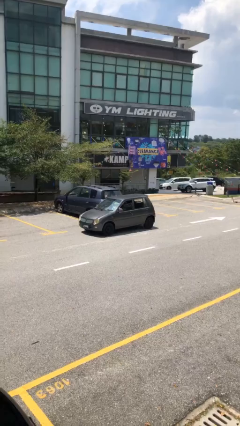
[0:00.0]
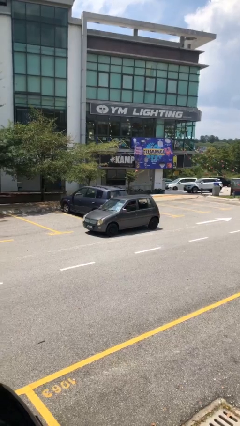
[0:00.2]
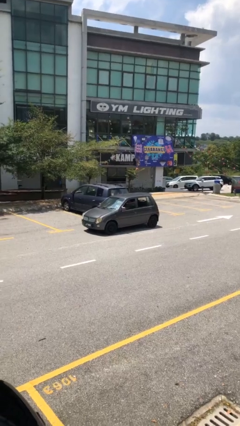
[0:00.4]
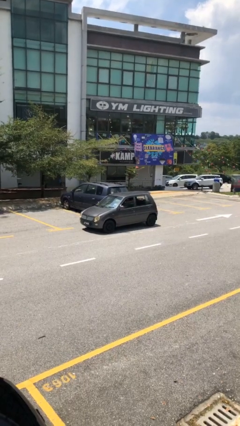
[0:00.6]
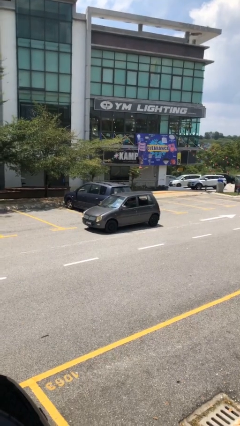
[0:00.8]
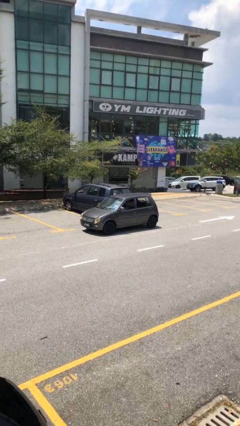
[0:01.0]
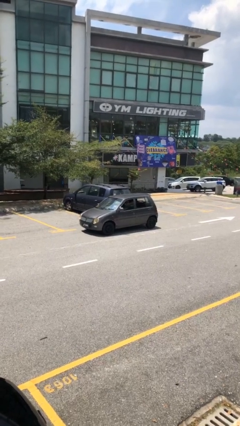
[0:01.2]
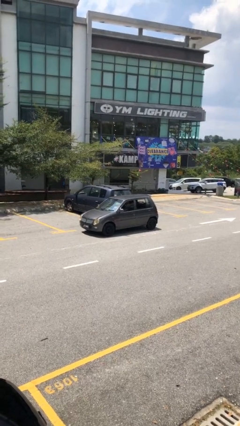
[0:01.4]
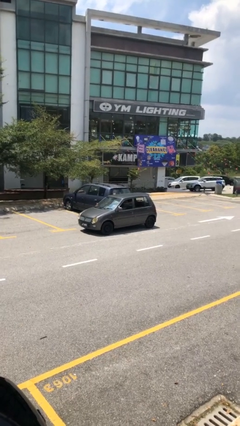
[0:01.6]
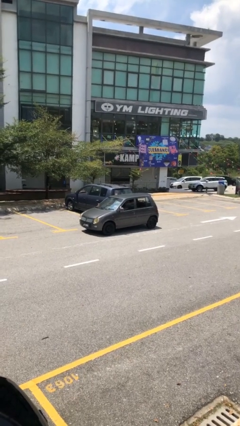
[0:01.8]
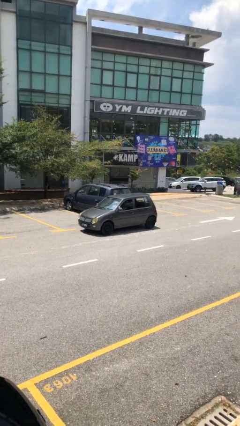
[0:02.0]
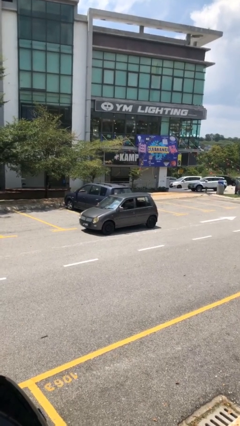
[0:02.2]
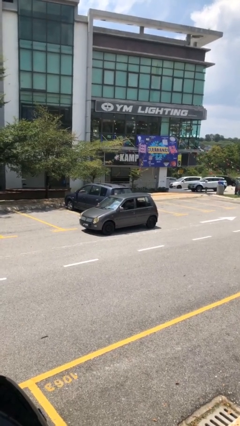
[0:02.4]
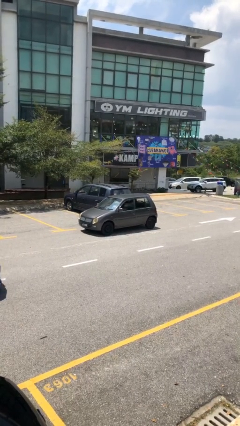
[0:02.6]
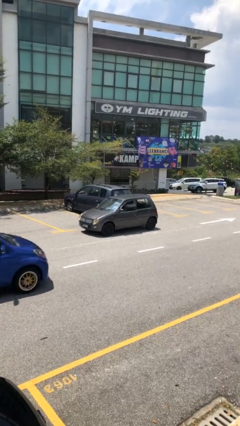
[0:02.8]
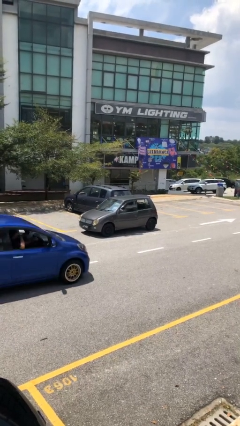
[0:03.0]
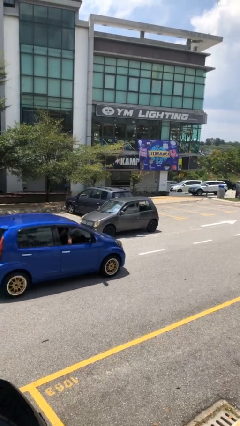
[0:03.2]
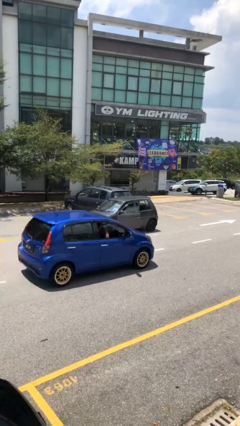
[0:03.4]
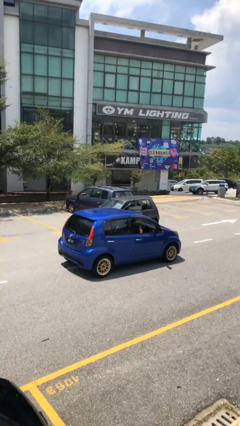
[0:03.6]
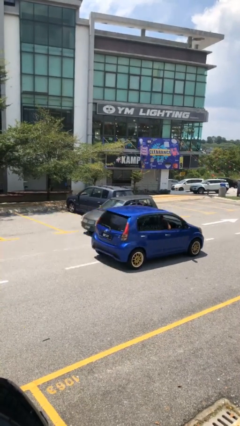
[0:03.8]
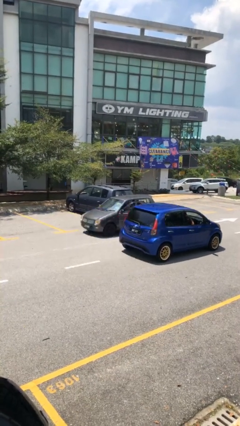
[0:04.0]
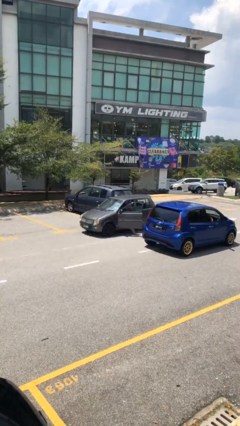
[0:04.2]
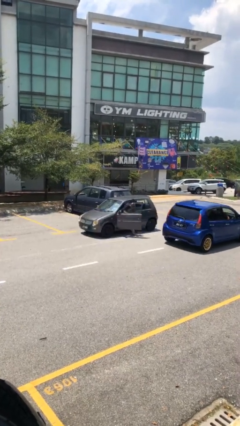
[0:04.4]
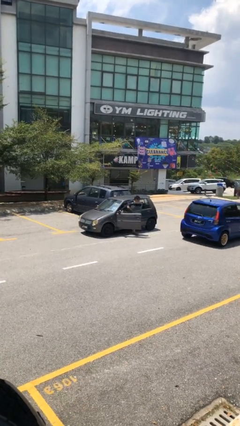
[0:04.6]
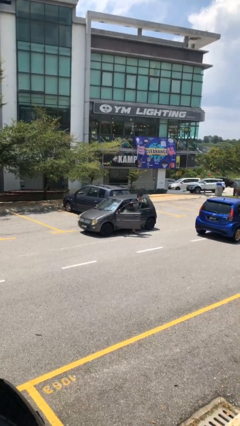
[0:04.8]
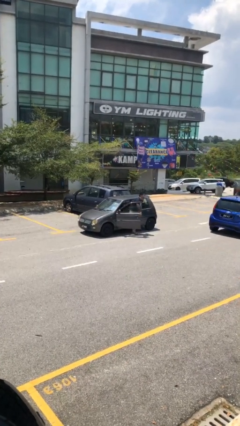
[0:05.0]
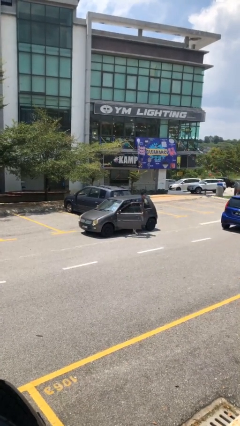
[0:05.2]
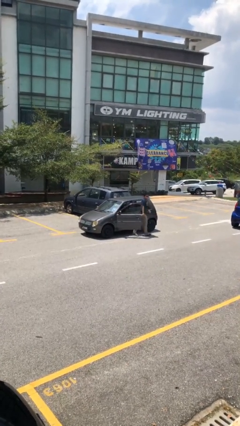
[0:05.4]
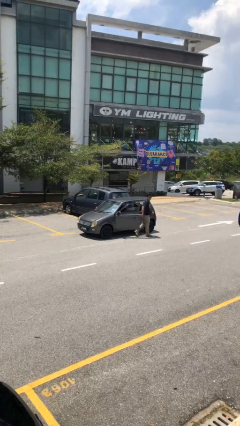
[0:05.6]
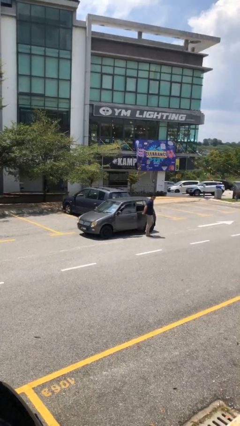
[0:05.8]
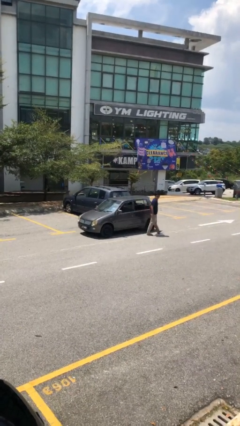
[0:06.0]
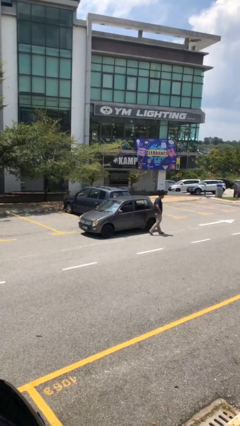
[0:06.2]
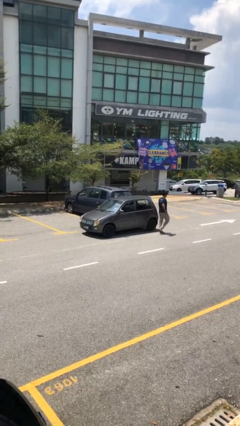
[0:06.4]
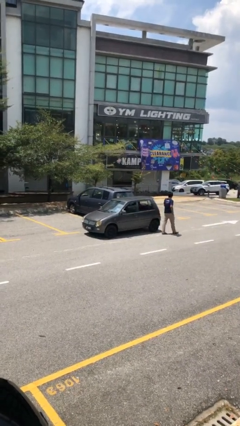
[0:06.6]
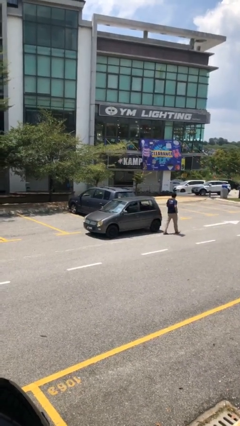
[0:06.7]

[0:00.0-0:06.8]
car drops off person

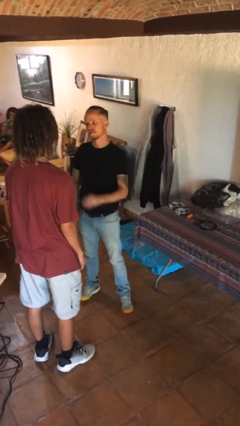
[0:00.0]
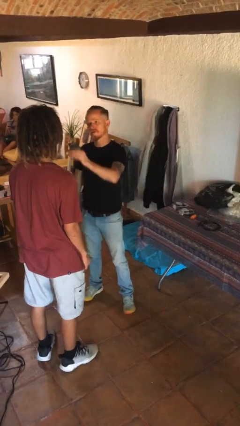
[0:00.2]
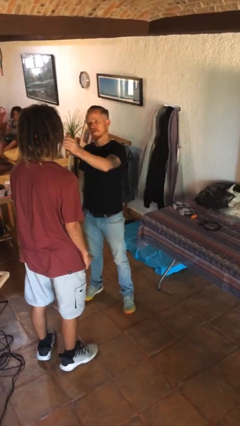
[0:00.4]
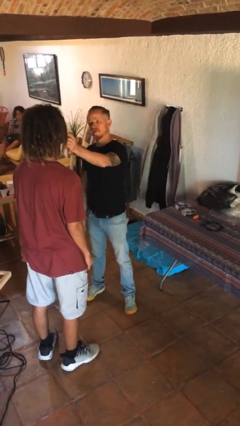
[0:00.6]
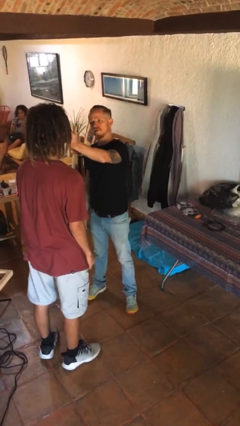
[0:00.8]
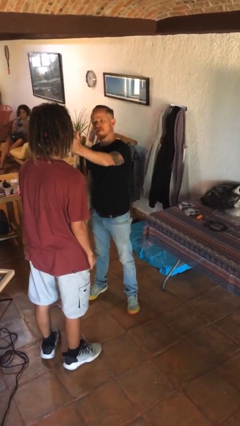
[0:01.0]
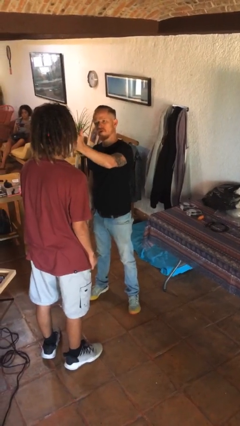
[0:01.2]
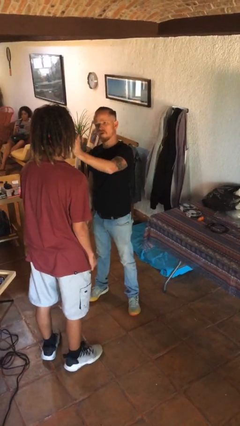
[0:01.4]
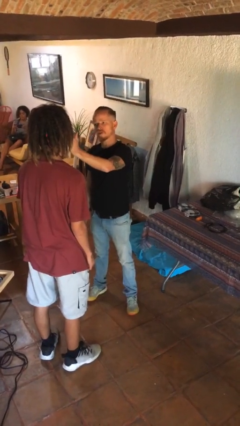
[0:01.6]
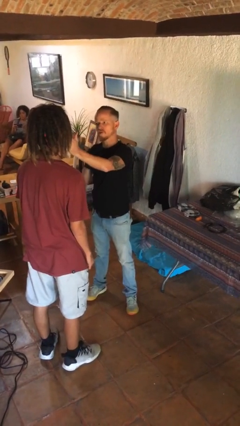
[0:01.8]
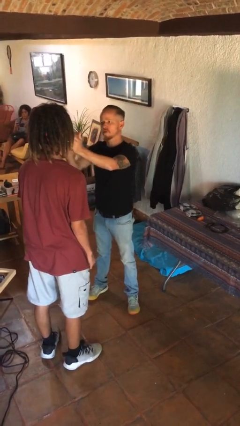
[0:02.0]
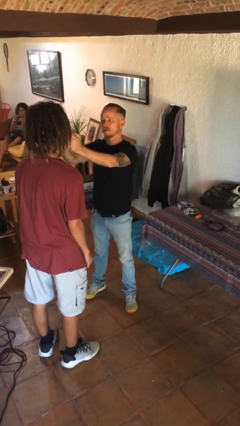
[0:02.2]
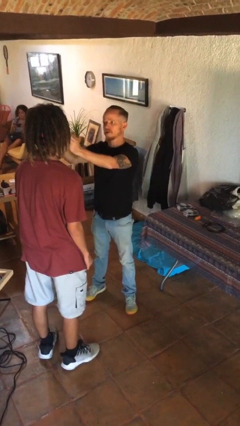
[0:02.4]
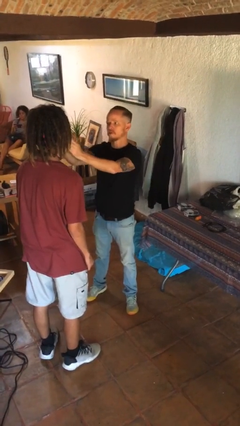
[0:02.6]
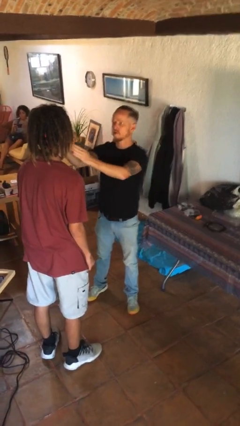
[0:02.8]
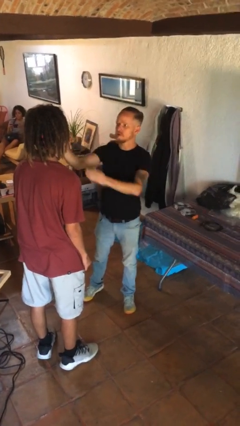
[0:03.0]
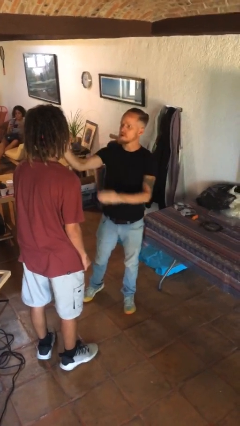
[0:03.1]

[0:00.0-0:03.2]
person touches face of person

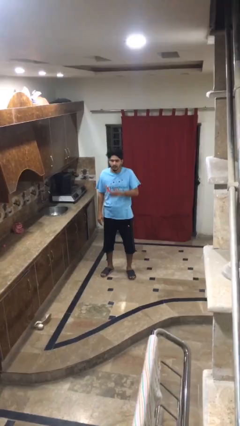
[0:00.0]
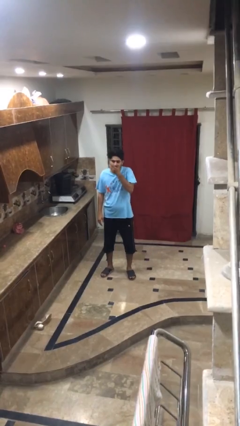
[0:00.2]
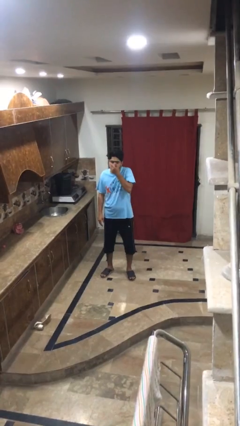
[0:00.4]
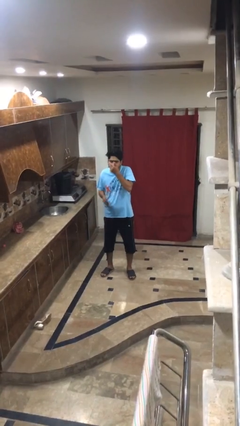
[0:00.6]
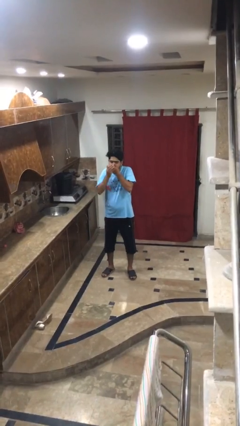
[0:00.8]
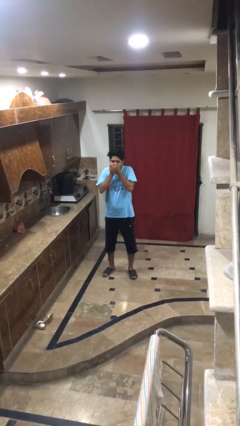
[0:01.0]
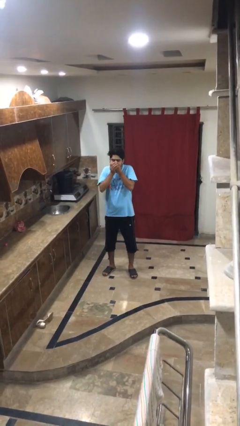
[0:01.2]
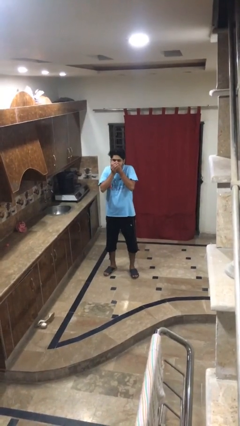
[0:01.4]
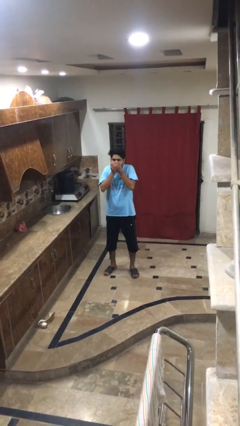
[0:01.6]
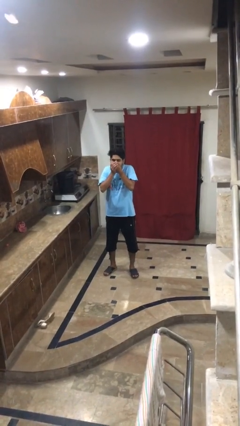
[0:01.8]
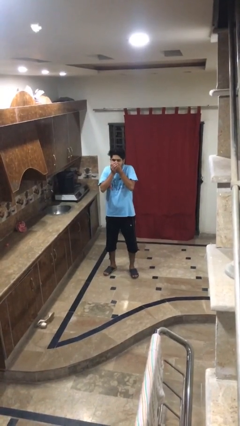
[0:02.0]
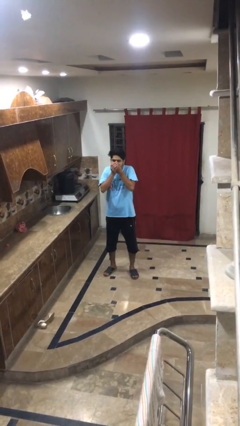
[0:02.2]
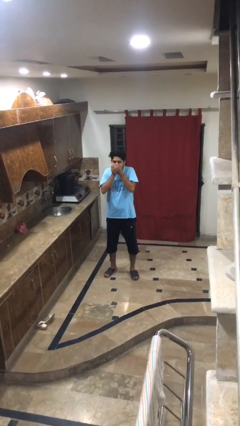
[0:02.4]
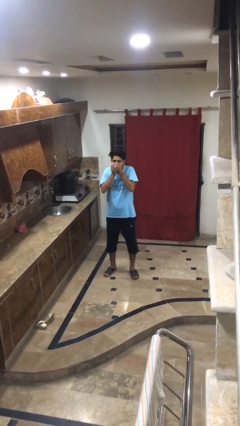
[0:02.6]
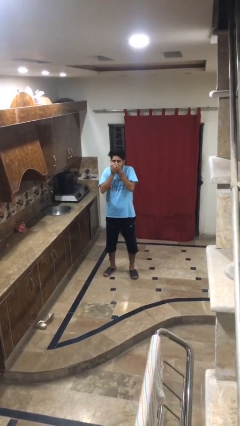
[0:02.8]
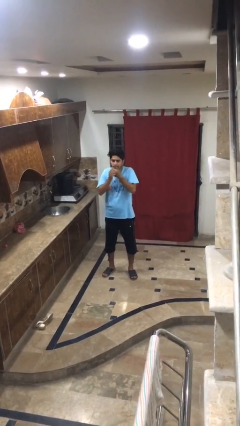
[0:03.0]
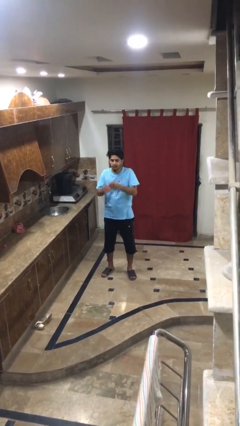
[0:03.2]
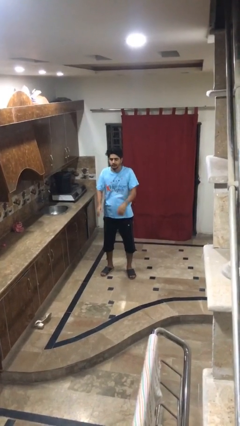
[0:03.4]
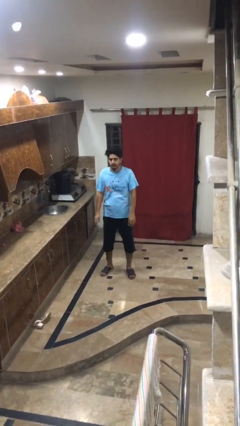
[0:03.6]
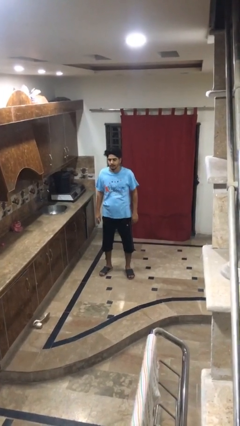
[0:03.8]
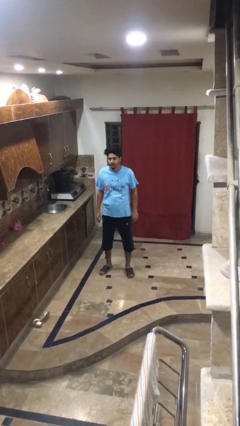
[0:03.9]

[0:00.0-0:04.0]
person sneezes into hand

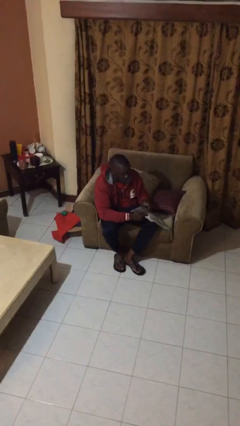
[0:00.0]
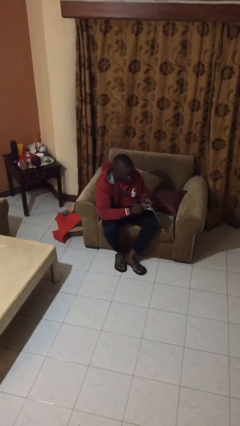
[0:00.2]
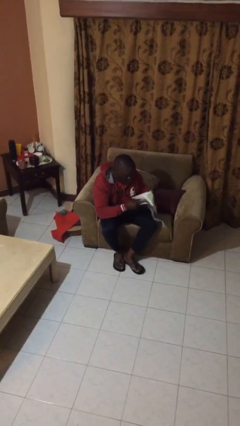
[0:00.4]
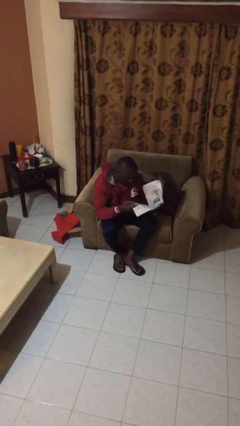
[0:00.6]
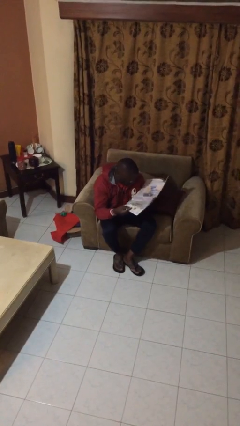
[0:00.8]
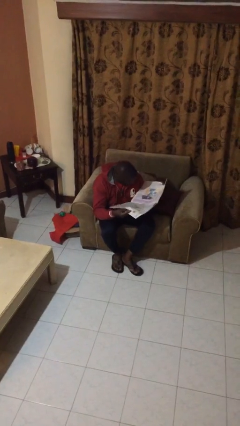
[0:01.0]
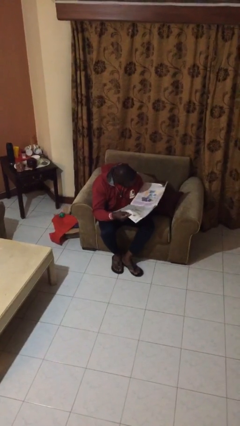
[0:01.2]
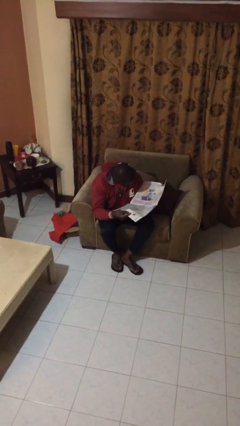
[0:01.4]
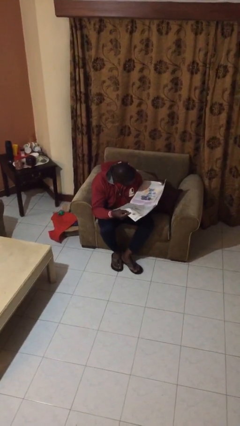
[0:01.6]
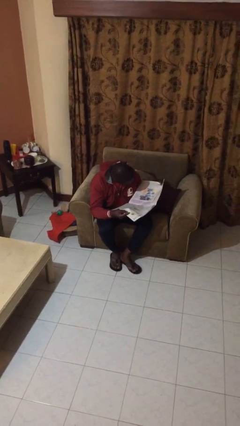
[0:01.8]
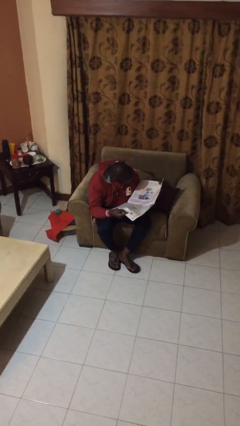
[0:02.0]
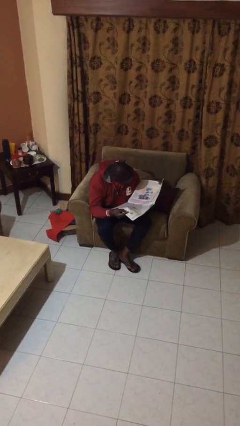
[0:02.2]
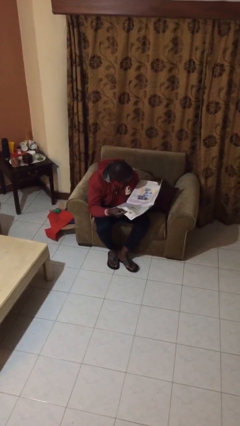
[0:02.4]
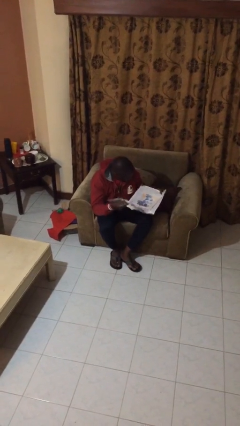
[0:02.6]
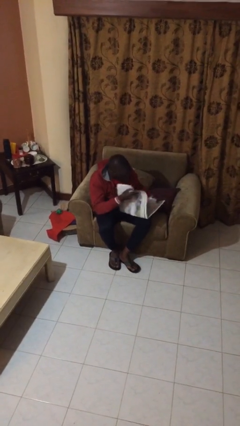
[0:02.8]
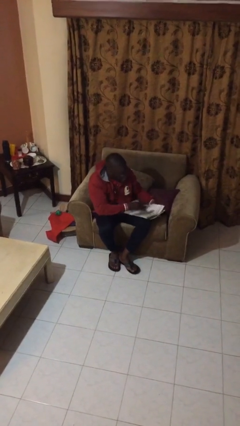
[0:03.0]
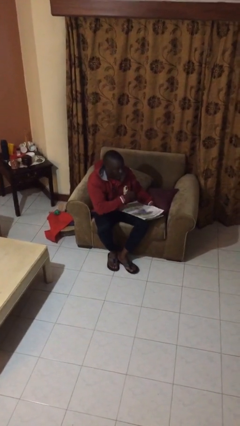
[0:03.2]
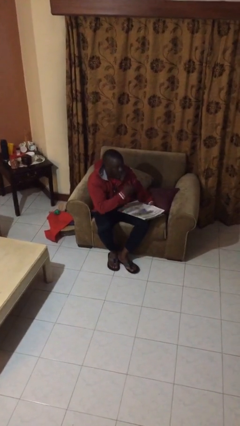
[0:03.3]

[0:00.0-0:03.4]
person reads newspaper

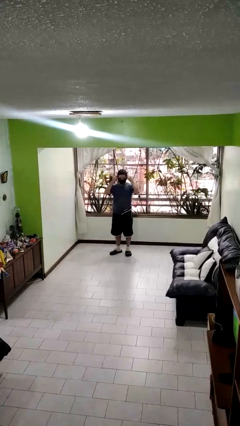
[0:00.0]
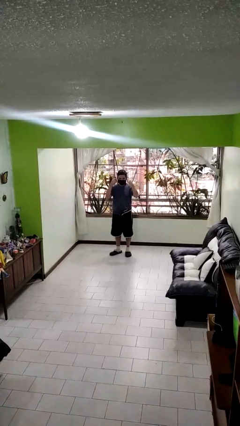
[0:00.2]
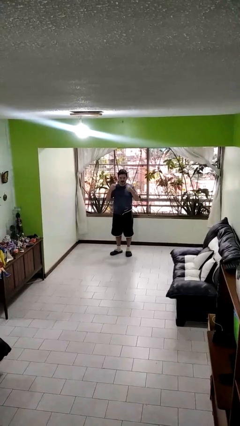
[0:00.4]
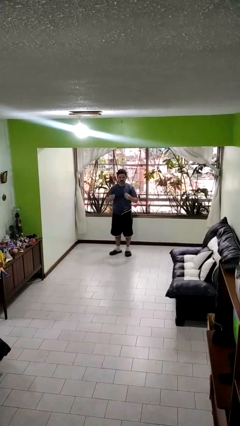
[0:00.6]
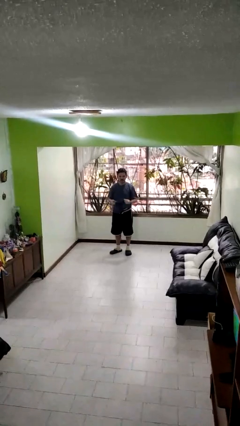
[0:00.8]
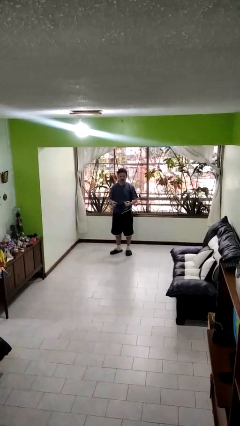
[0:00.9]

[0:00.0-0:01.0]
person takes off facemask
